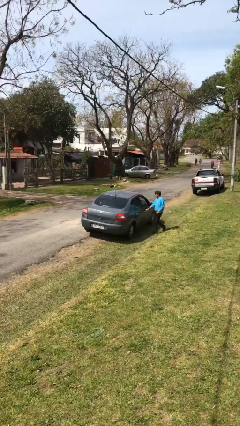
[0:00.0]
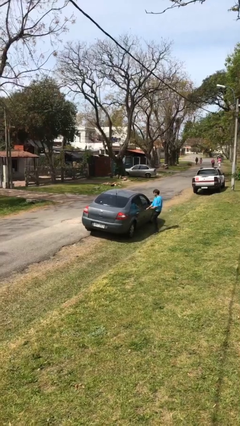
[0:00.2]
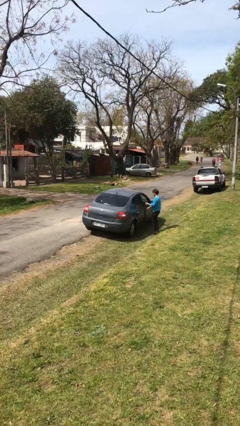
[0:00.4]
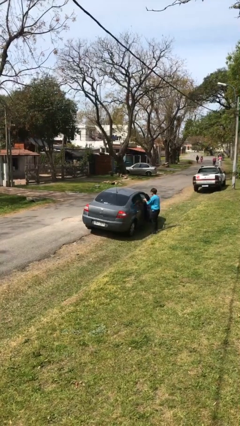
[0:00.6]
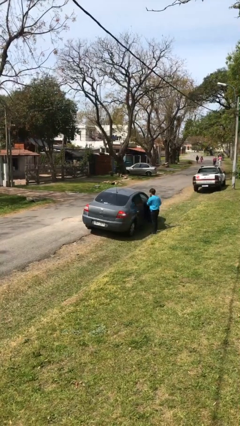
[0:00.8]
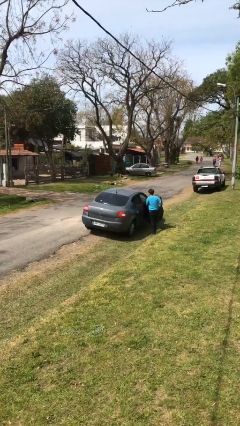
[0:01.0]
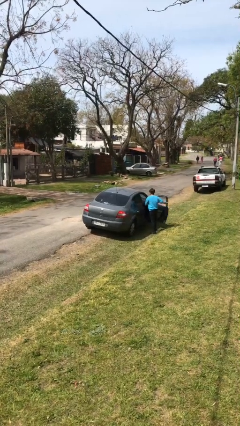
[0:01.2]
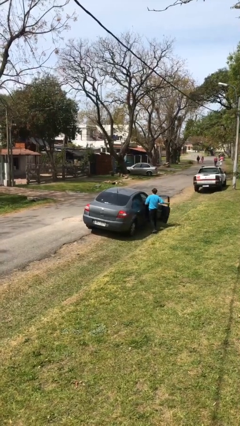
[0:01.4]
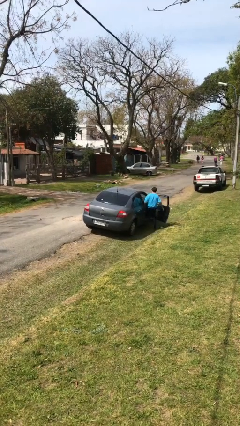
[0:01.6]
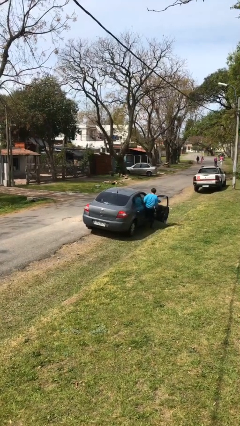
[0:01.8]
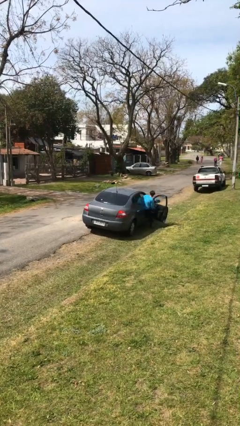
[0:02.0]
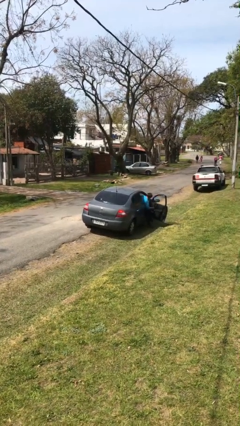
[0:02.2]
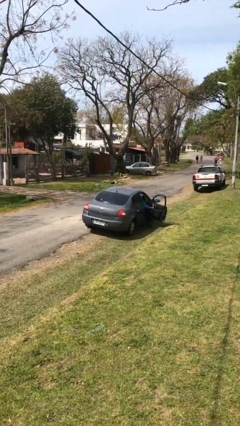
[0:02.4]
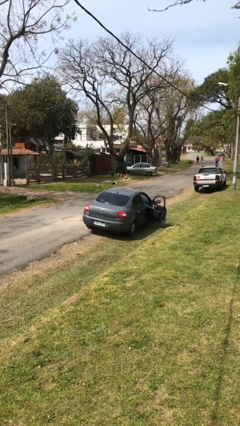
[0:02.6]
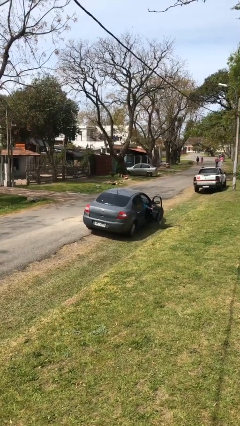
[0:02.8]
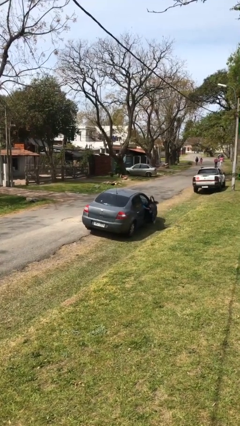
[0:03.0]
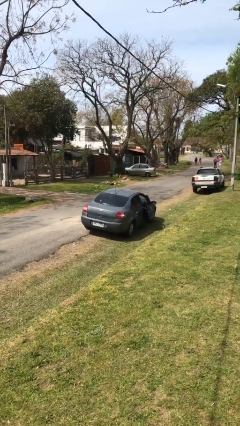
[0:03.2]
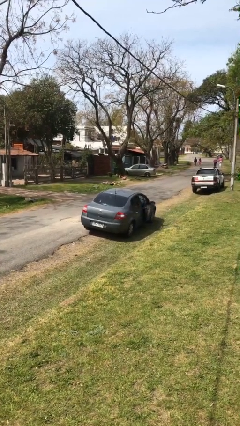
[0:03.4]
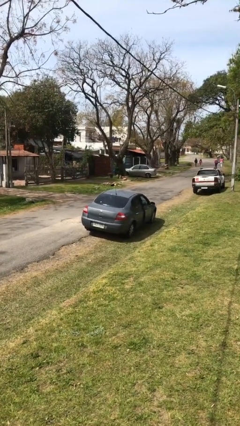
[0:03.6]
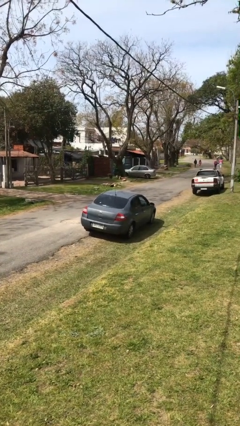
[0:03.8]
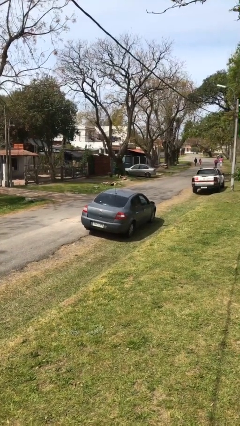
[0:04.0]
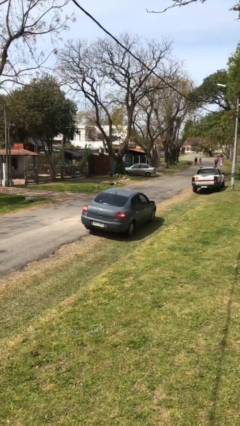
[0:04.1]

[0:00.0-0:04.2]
car picks up person

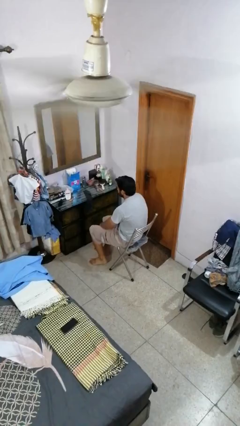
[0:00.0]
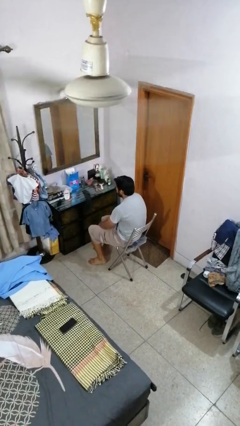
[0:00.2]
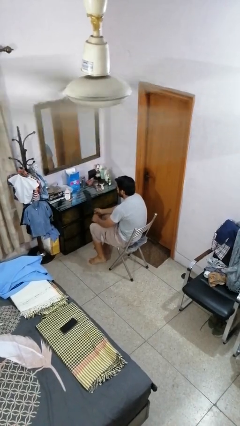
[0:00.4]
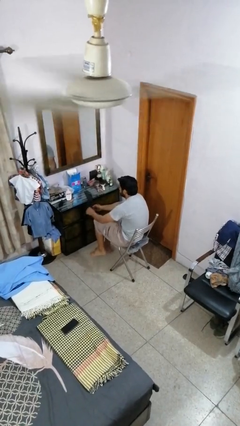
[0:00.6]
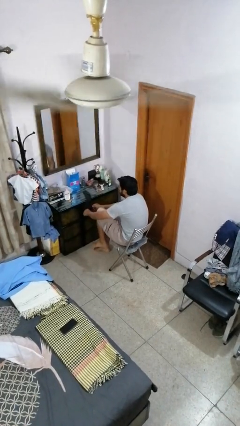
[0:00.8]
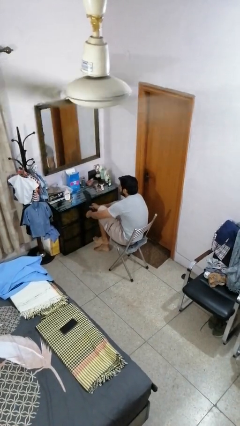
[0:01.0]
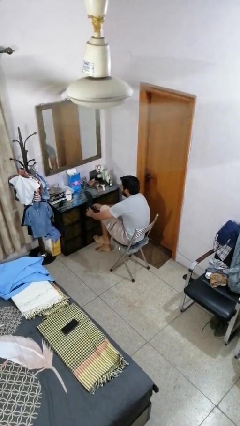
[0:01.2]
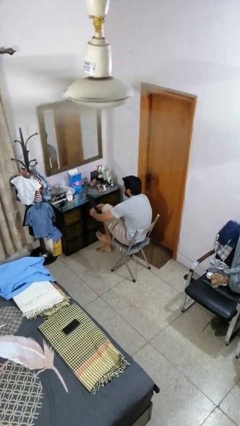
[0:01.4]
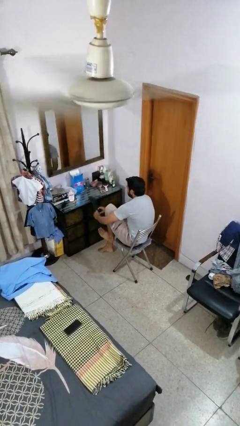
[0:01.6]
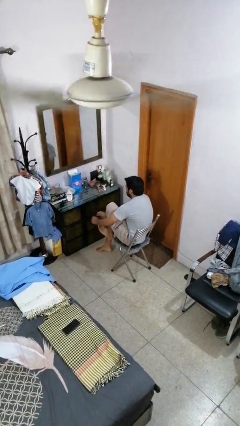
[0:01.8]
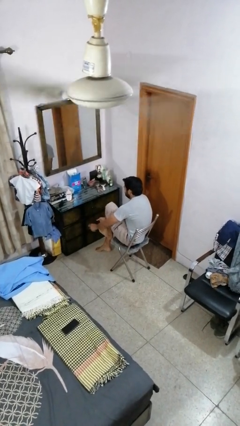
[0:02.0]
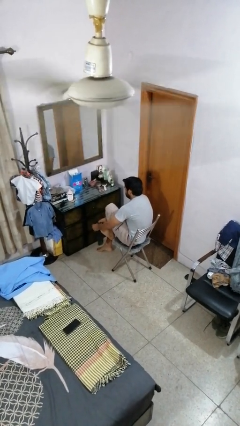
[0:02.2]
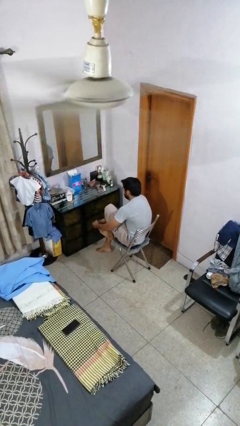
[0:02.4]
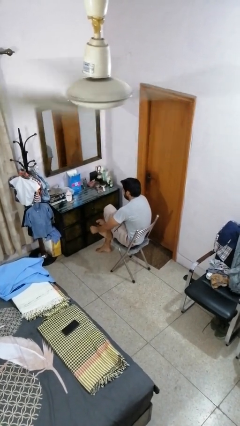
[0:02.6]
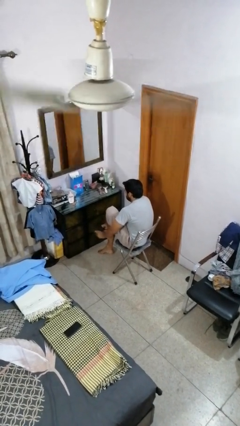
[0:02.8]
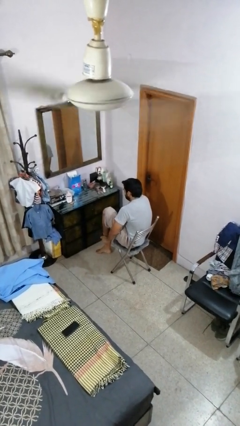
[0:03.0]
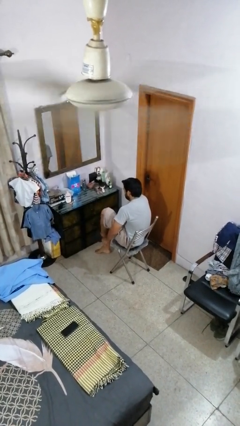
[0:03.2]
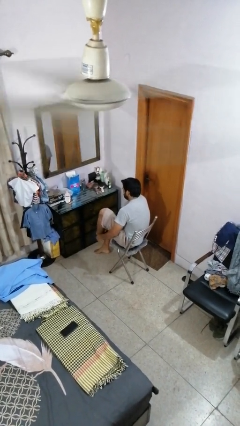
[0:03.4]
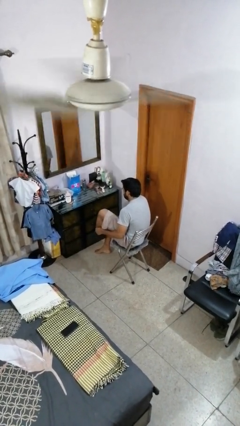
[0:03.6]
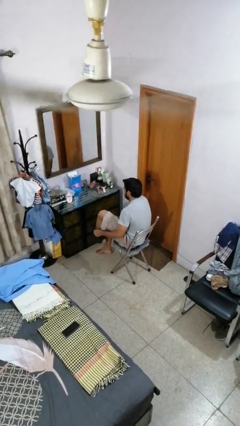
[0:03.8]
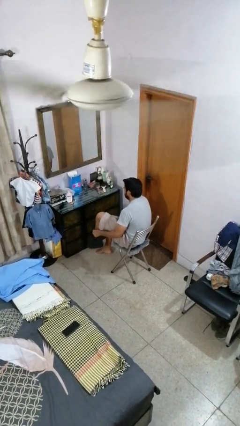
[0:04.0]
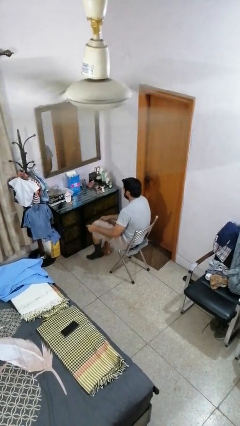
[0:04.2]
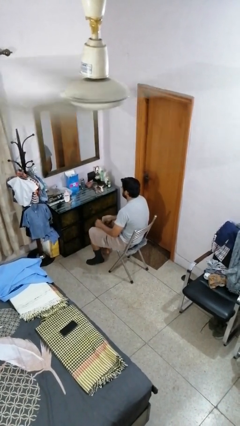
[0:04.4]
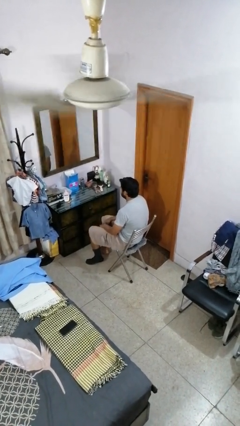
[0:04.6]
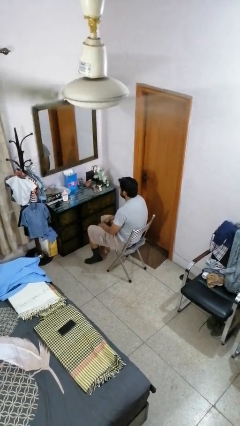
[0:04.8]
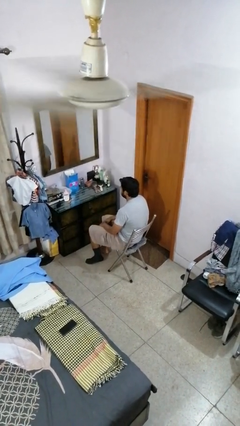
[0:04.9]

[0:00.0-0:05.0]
person puts on socks

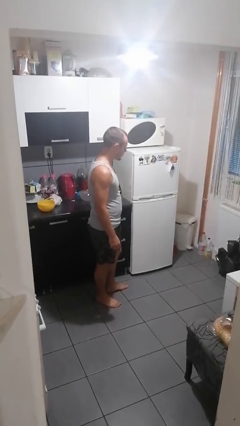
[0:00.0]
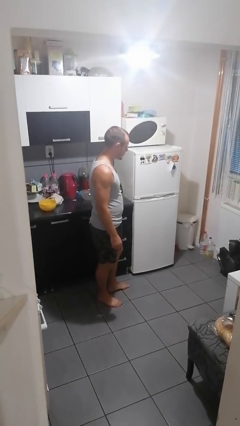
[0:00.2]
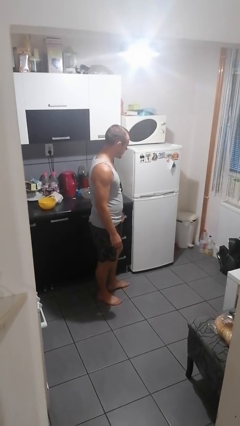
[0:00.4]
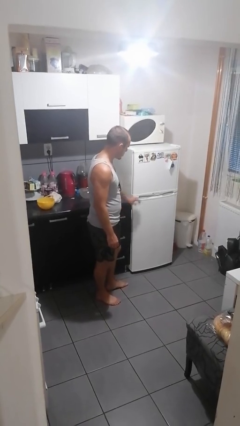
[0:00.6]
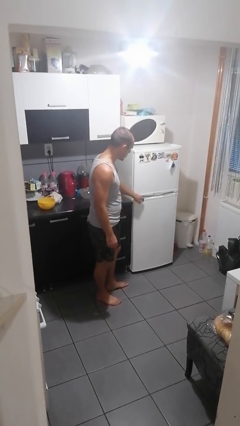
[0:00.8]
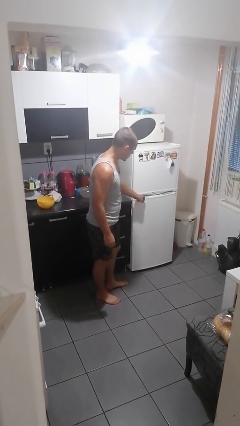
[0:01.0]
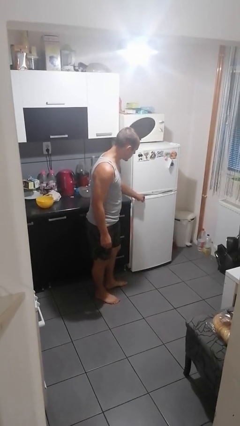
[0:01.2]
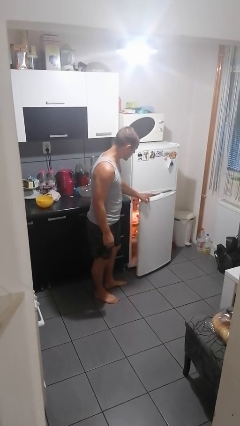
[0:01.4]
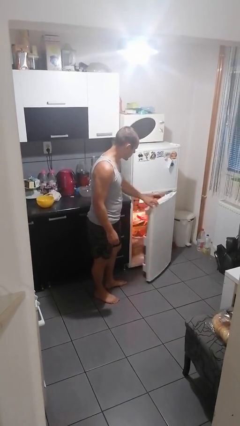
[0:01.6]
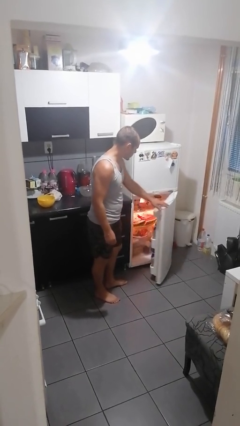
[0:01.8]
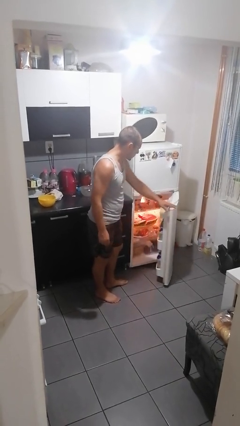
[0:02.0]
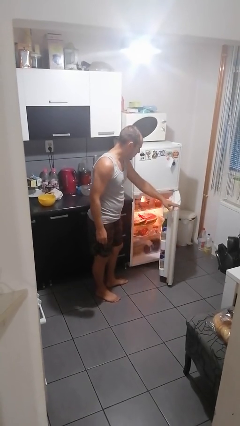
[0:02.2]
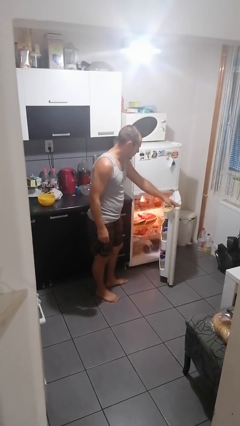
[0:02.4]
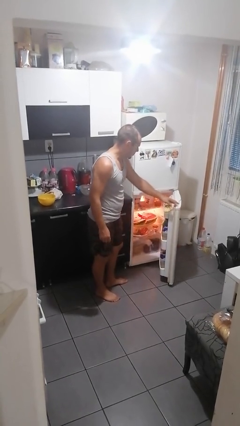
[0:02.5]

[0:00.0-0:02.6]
person opens refrigerator

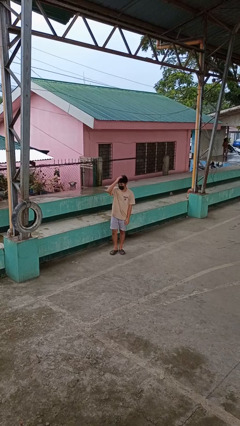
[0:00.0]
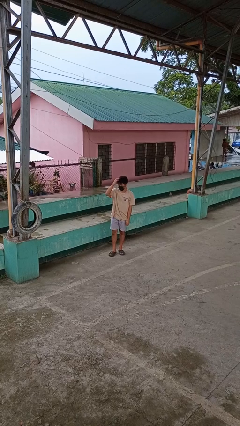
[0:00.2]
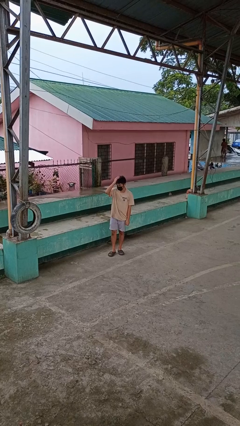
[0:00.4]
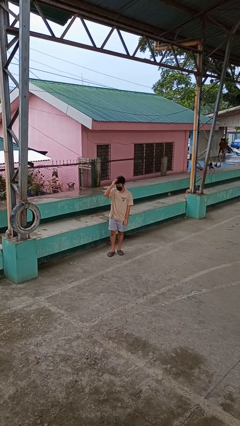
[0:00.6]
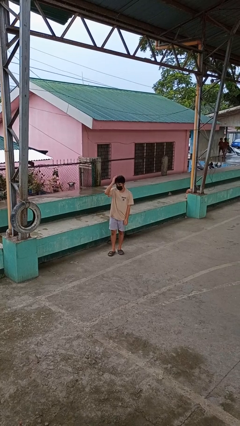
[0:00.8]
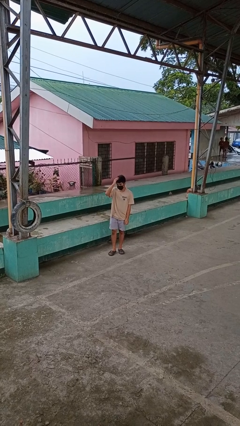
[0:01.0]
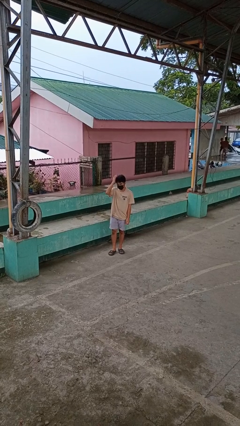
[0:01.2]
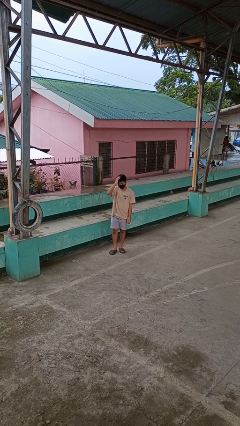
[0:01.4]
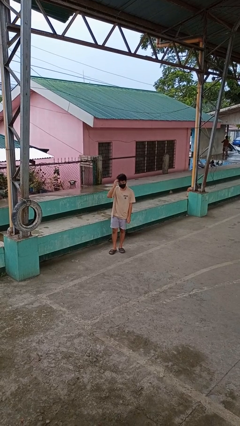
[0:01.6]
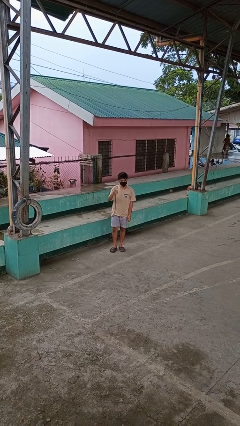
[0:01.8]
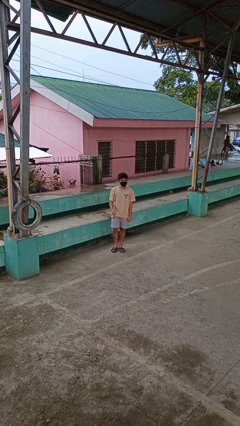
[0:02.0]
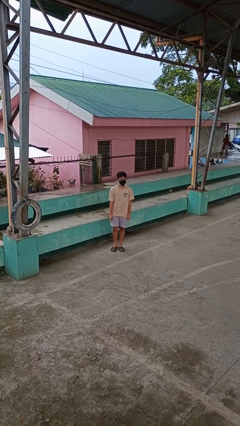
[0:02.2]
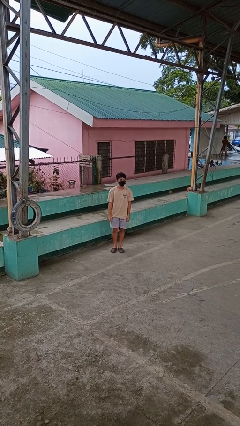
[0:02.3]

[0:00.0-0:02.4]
person pats head

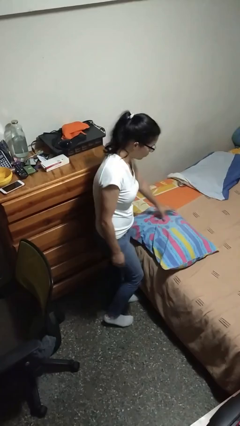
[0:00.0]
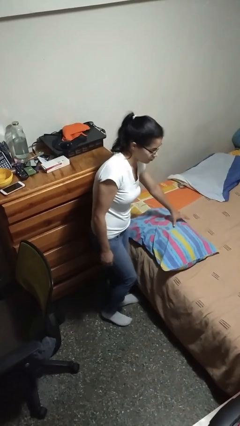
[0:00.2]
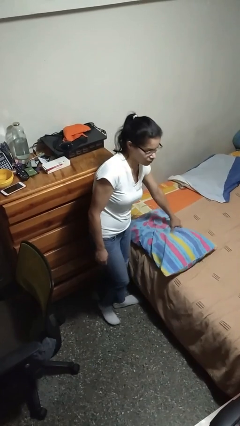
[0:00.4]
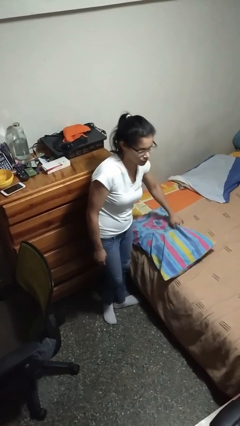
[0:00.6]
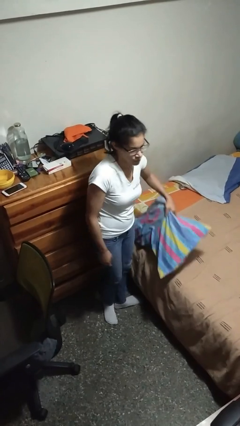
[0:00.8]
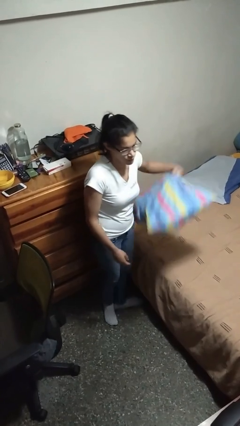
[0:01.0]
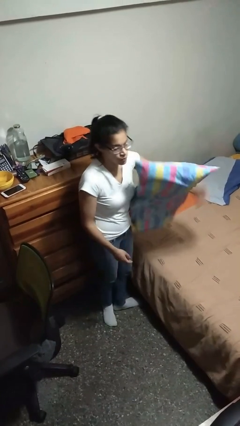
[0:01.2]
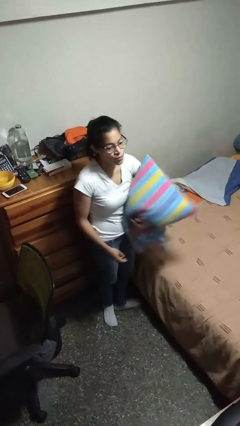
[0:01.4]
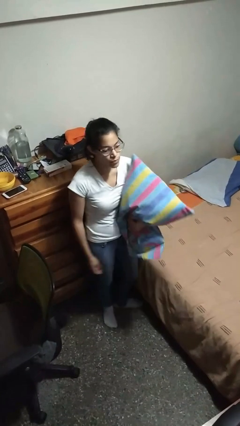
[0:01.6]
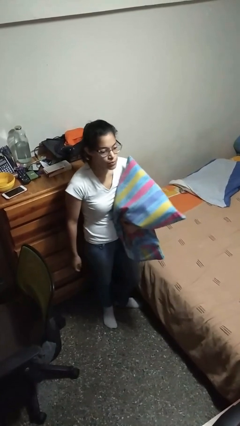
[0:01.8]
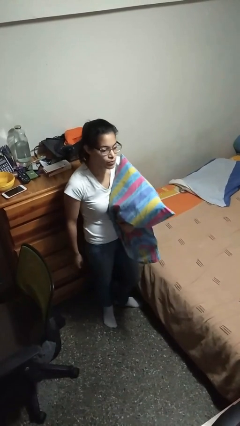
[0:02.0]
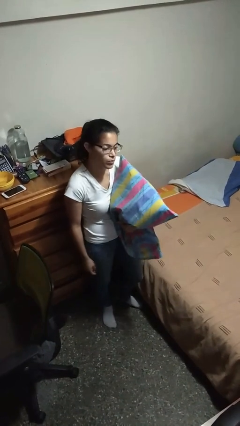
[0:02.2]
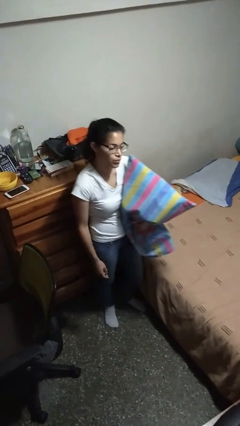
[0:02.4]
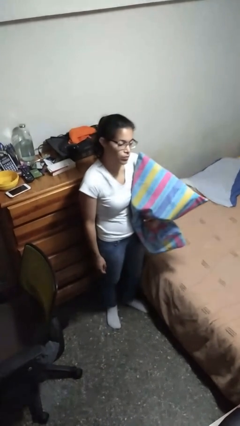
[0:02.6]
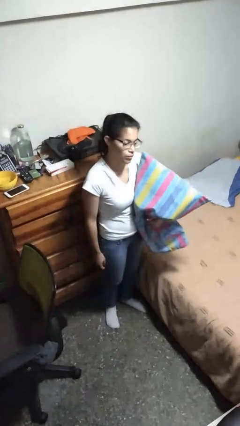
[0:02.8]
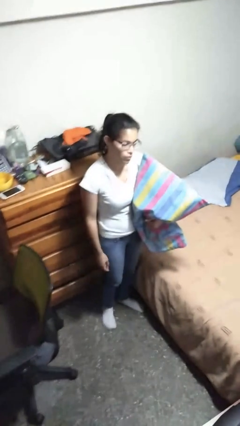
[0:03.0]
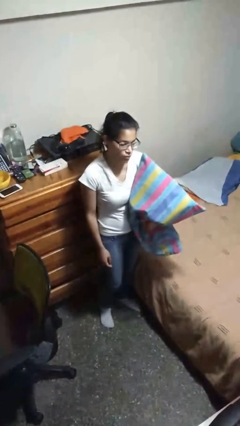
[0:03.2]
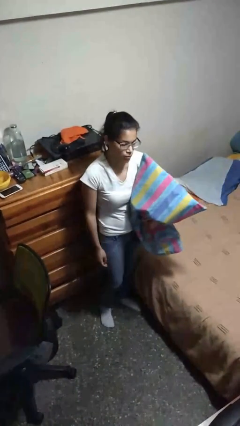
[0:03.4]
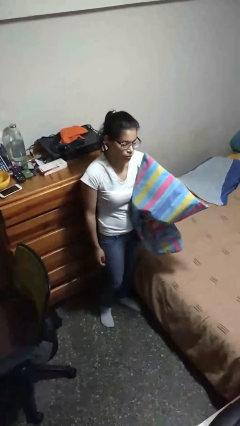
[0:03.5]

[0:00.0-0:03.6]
person picks up object from bed
